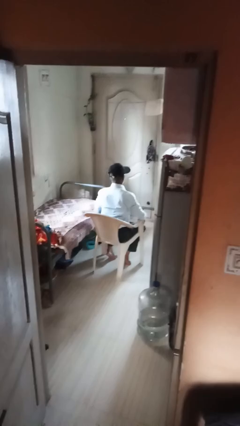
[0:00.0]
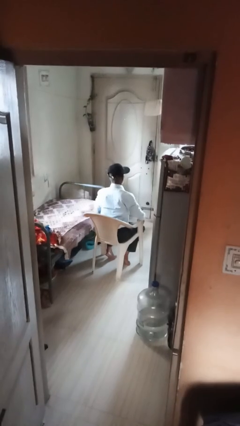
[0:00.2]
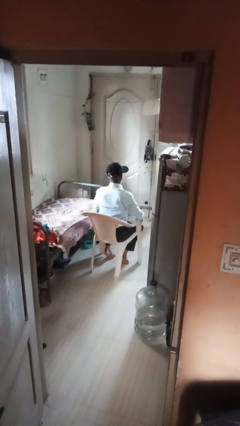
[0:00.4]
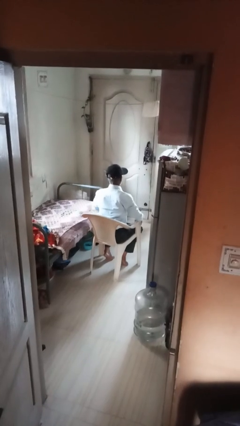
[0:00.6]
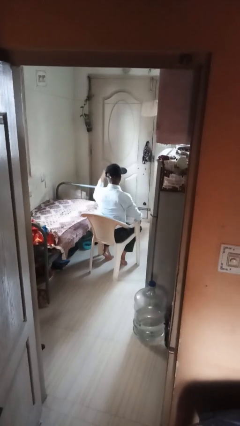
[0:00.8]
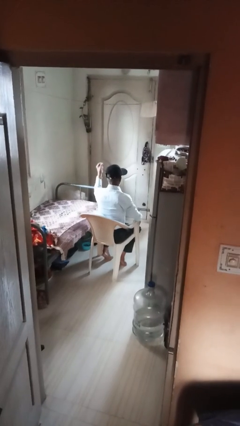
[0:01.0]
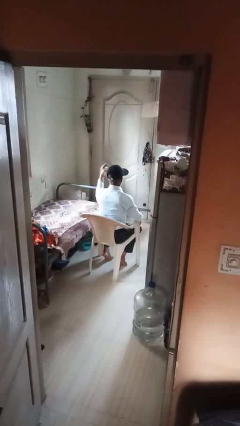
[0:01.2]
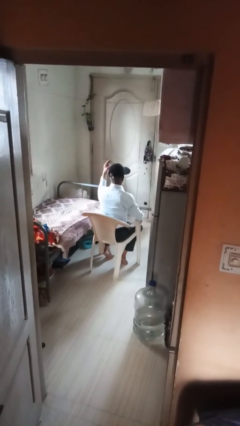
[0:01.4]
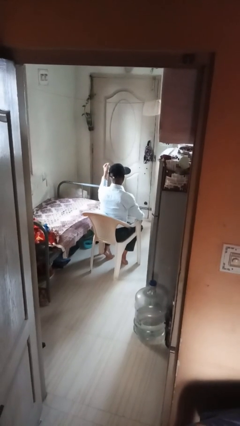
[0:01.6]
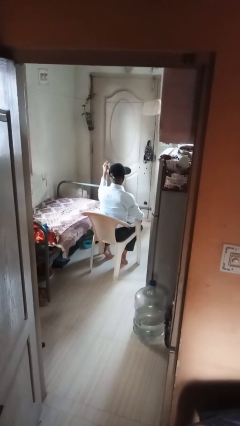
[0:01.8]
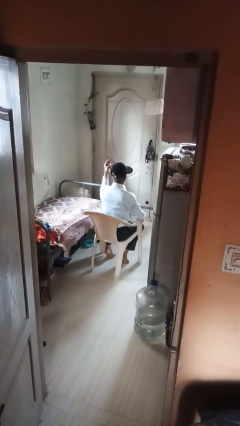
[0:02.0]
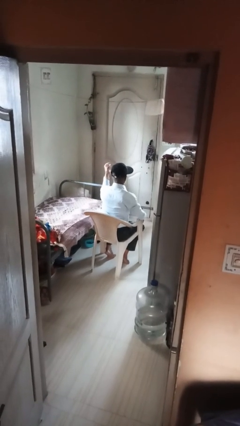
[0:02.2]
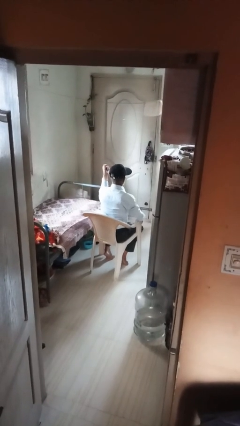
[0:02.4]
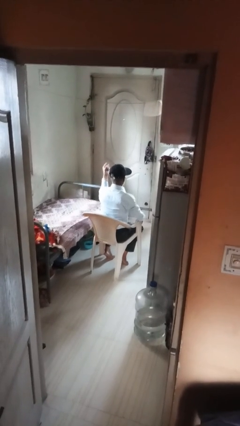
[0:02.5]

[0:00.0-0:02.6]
person snaps fingers

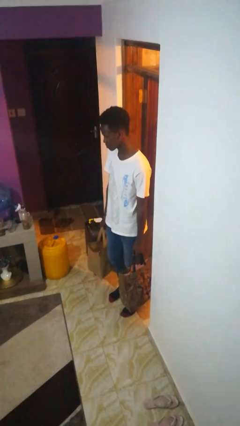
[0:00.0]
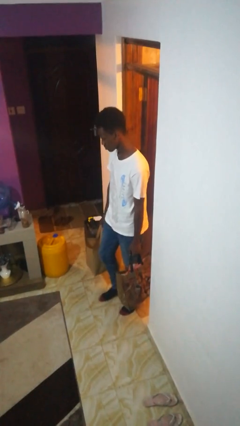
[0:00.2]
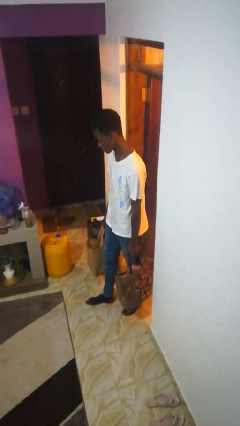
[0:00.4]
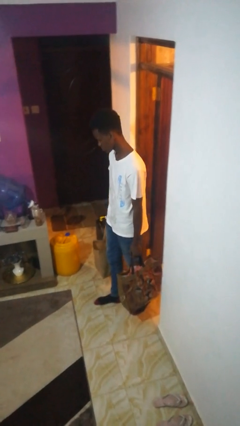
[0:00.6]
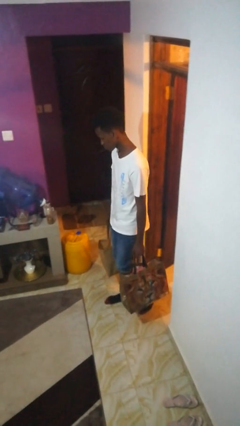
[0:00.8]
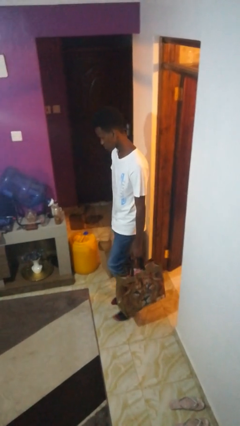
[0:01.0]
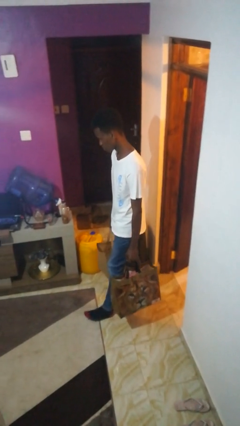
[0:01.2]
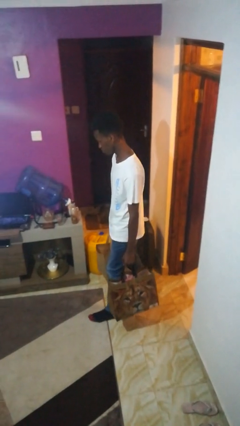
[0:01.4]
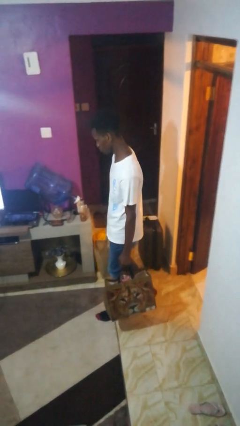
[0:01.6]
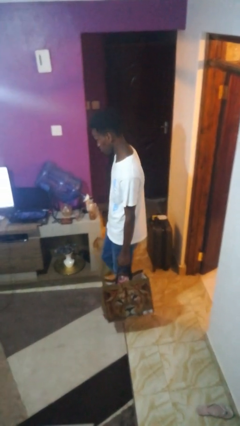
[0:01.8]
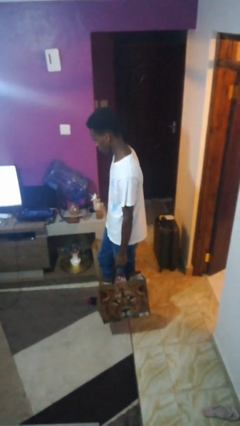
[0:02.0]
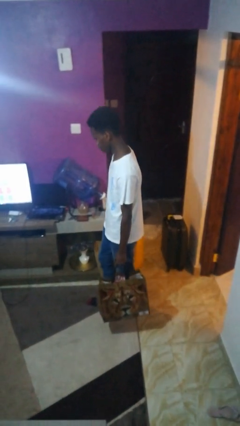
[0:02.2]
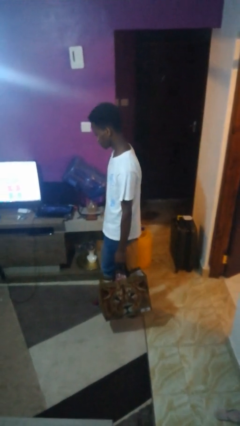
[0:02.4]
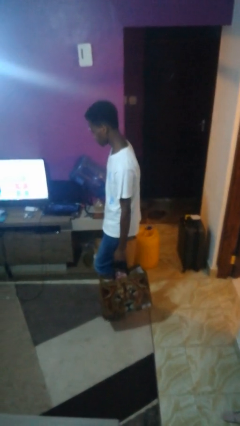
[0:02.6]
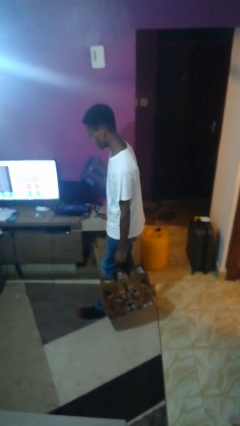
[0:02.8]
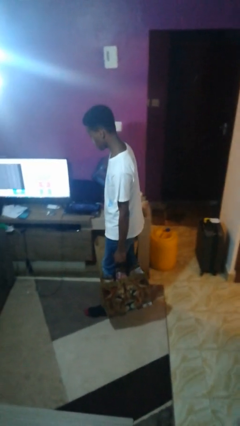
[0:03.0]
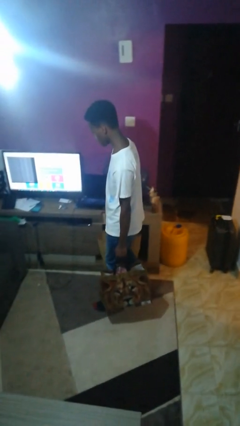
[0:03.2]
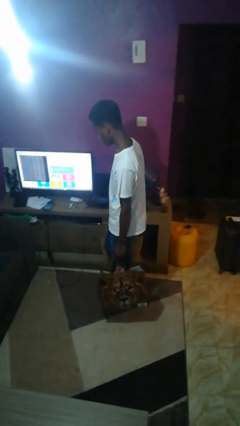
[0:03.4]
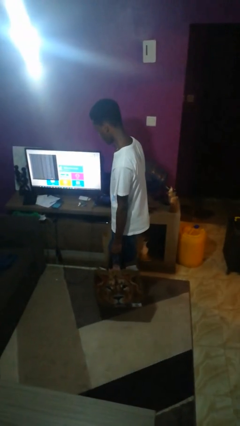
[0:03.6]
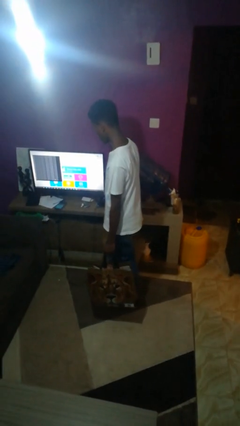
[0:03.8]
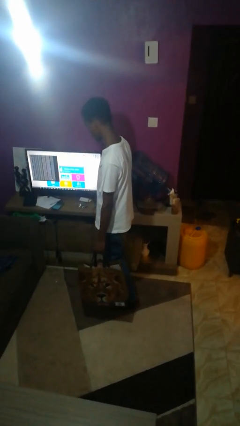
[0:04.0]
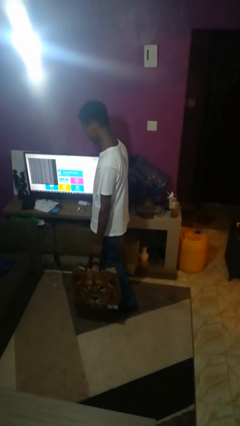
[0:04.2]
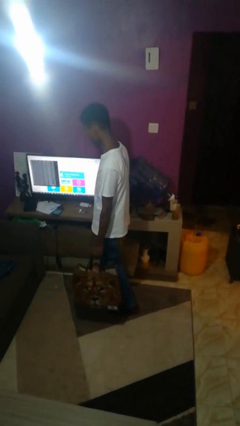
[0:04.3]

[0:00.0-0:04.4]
person carries groceries

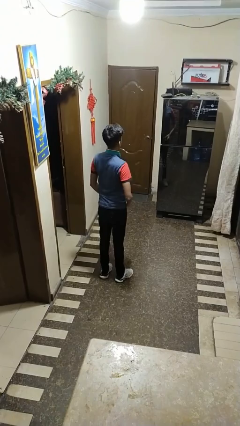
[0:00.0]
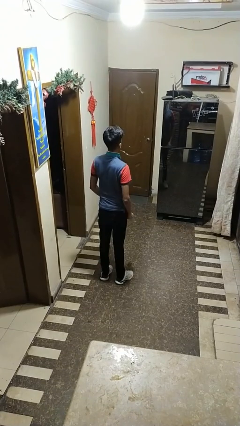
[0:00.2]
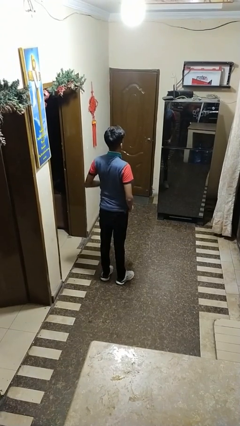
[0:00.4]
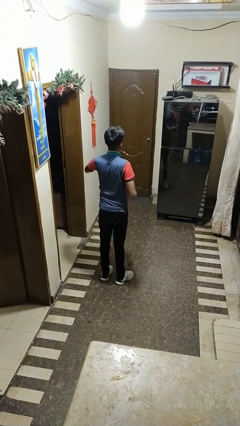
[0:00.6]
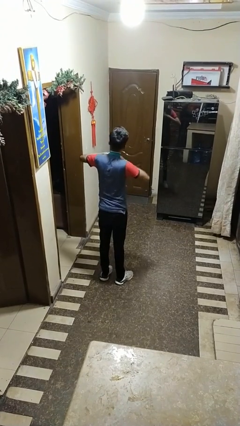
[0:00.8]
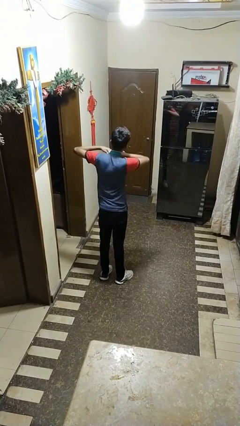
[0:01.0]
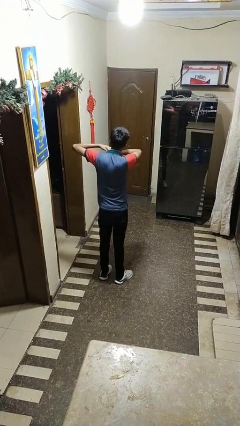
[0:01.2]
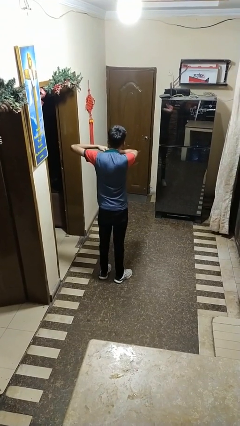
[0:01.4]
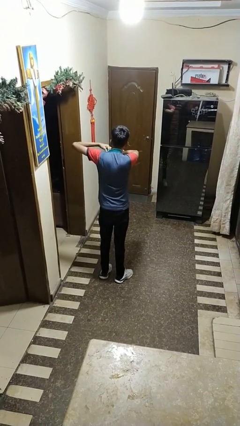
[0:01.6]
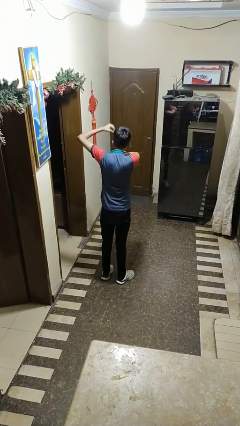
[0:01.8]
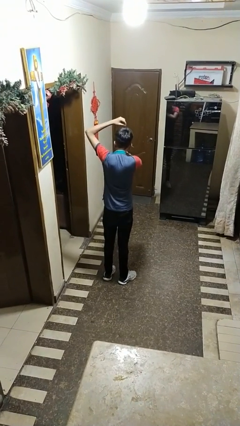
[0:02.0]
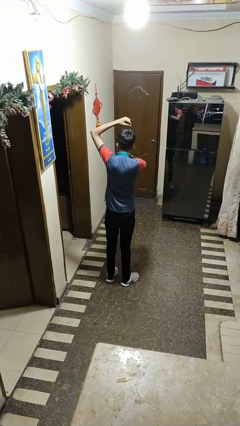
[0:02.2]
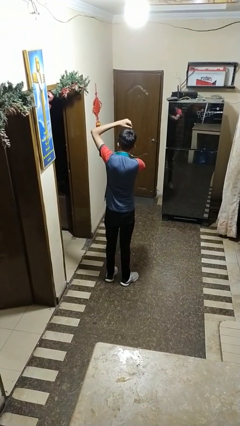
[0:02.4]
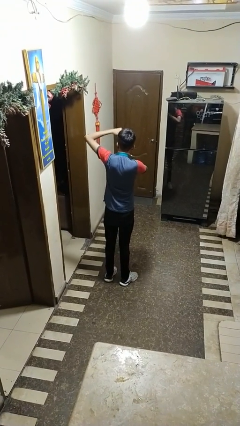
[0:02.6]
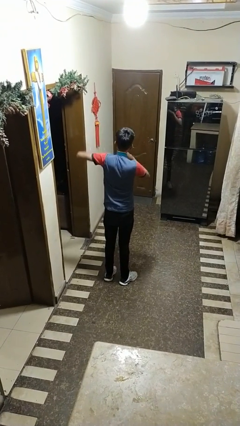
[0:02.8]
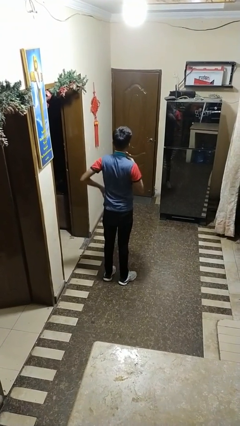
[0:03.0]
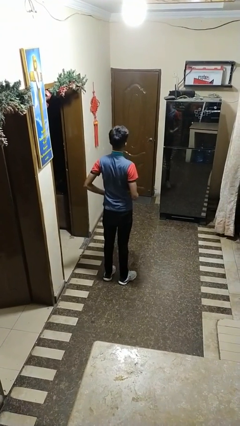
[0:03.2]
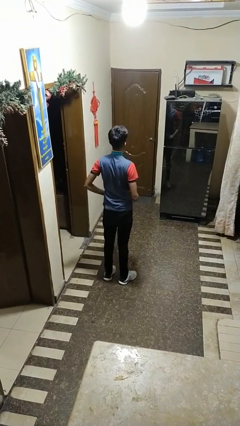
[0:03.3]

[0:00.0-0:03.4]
person applies deodorant

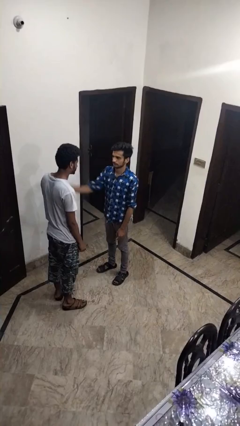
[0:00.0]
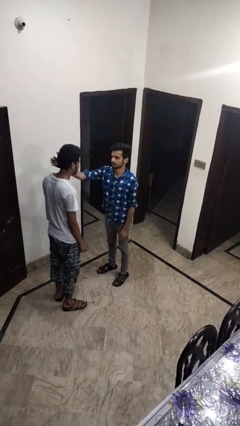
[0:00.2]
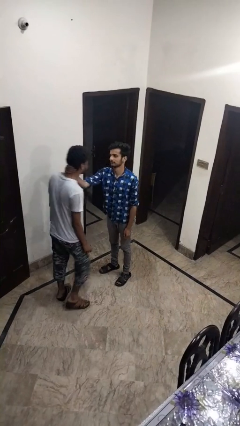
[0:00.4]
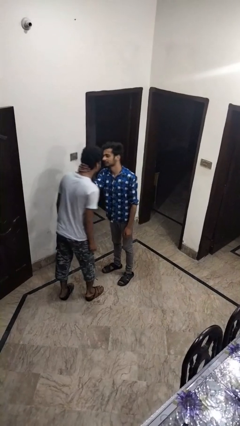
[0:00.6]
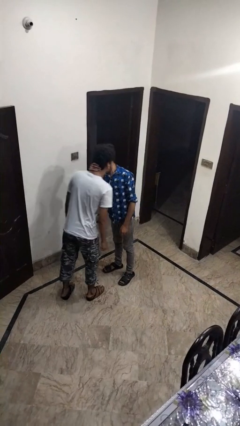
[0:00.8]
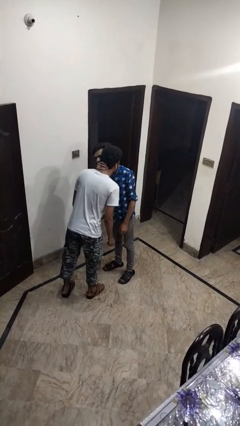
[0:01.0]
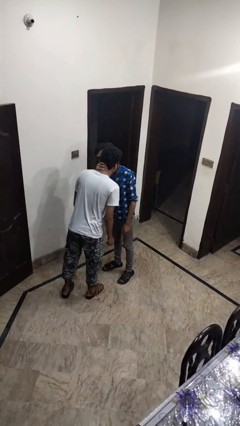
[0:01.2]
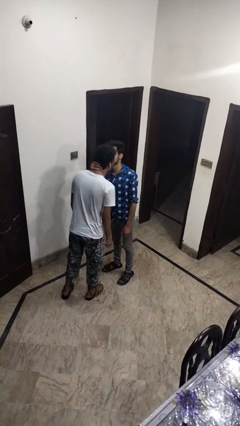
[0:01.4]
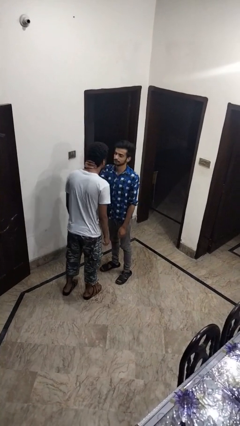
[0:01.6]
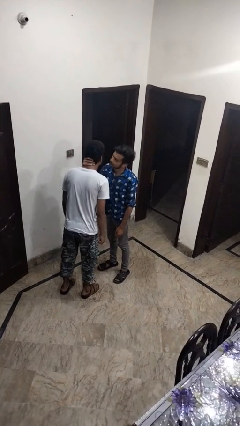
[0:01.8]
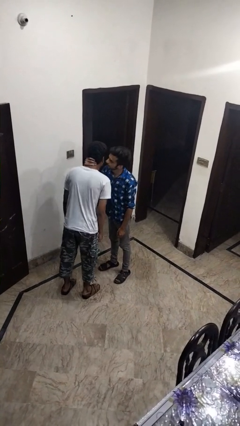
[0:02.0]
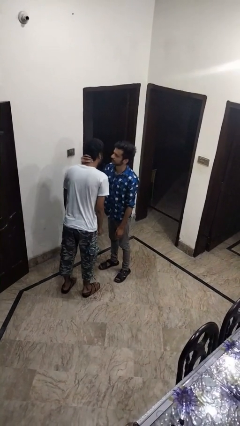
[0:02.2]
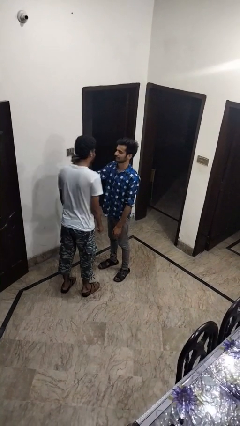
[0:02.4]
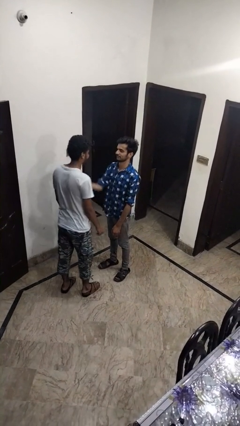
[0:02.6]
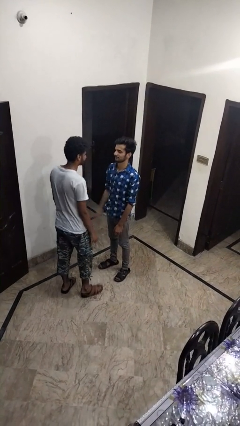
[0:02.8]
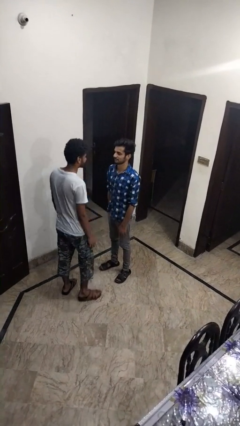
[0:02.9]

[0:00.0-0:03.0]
person kisses cheek of person

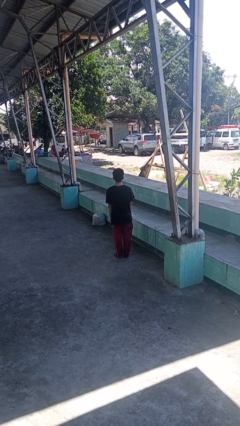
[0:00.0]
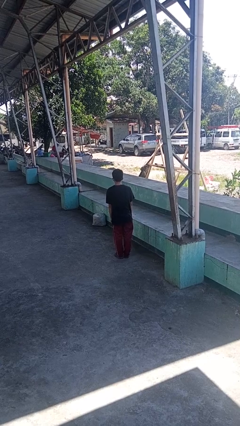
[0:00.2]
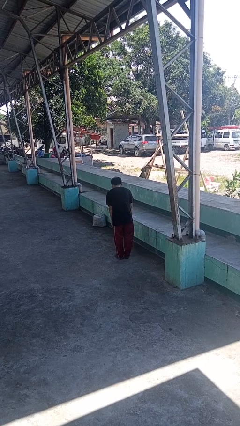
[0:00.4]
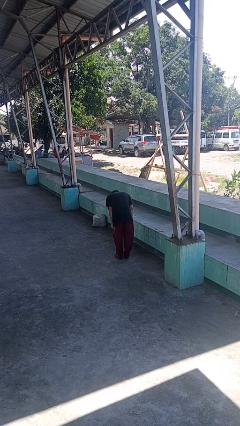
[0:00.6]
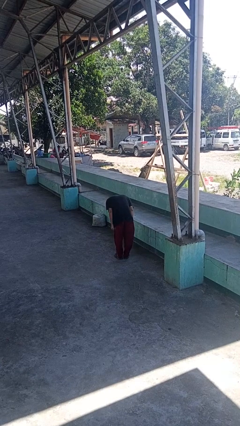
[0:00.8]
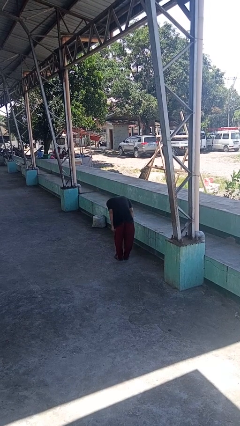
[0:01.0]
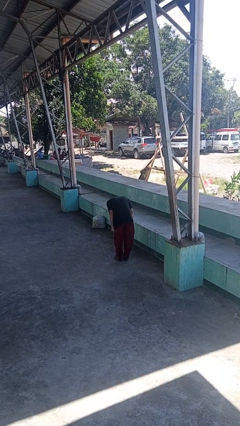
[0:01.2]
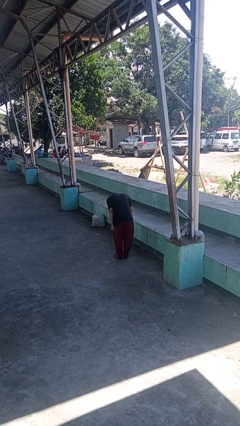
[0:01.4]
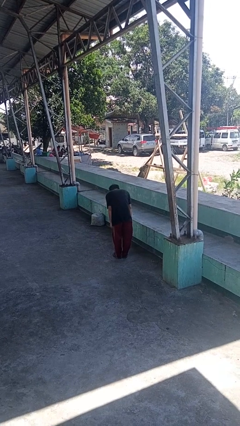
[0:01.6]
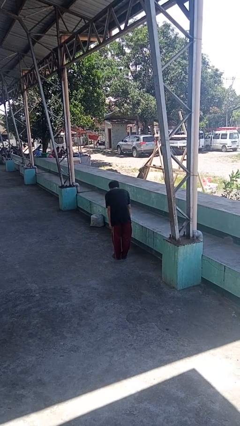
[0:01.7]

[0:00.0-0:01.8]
person bows

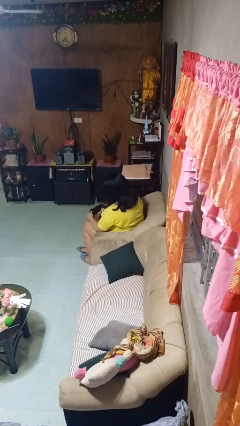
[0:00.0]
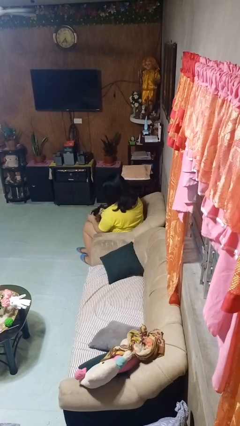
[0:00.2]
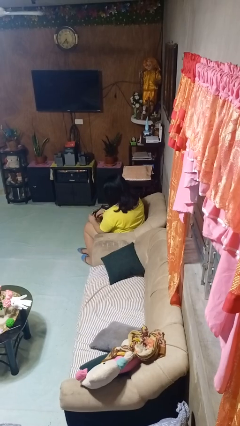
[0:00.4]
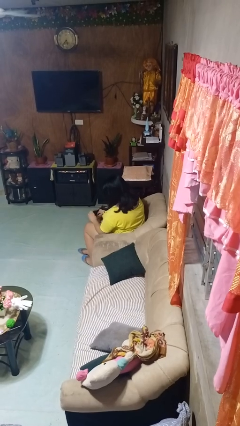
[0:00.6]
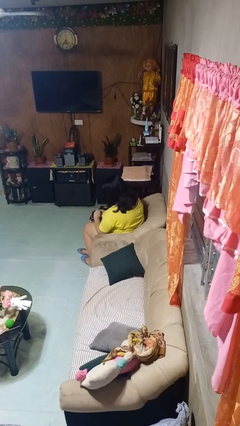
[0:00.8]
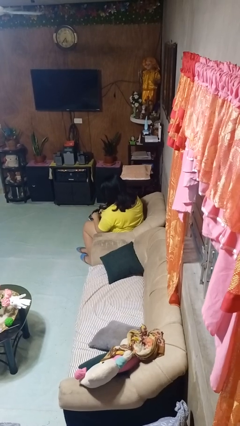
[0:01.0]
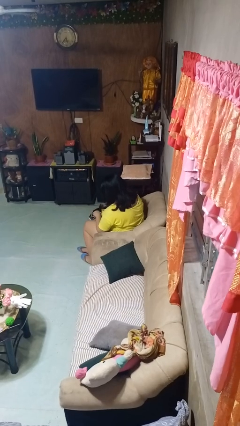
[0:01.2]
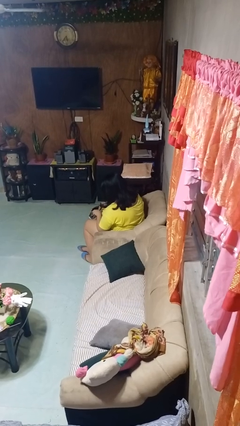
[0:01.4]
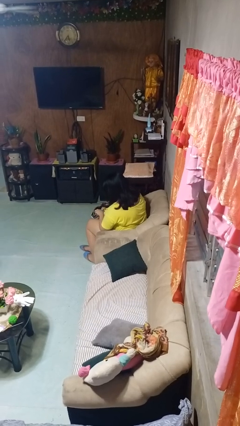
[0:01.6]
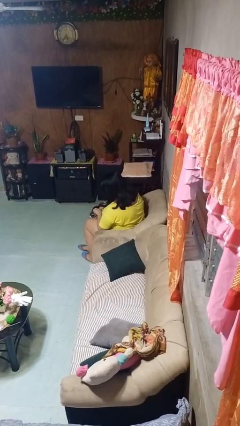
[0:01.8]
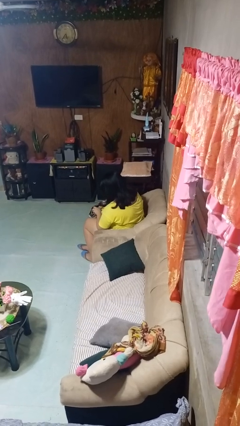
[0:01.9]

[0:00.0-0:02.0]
person searches in purse
